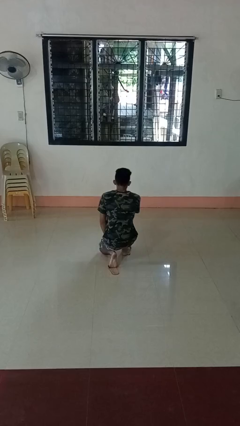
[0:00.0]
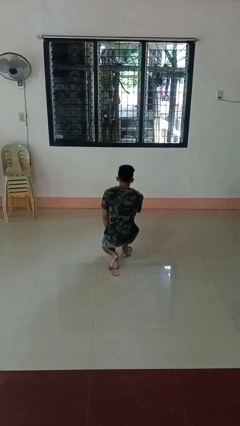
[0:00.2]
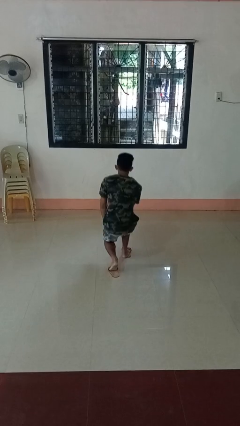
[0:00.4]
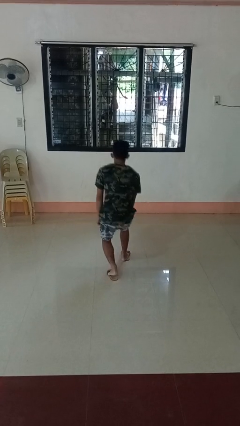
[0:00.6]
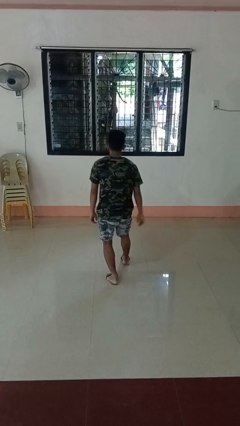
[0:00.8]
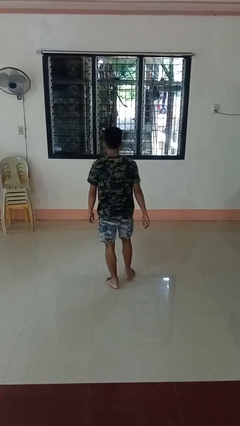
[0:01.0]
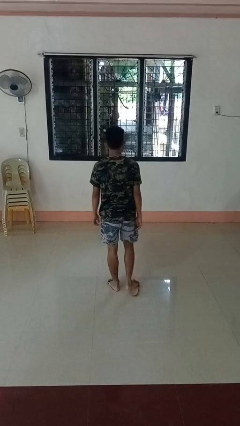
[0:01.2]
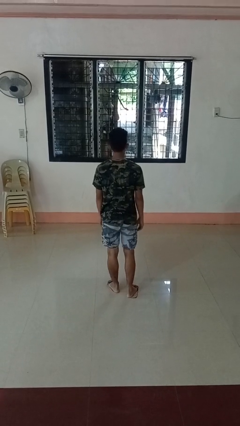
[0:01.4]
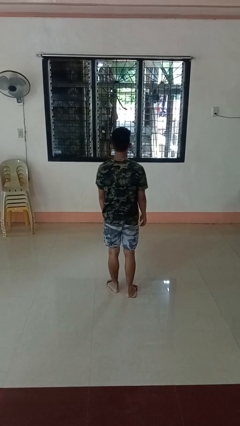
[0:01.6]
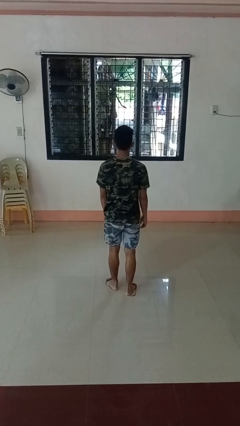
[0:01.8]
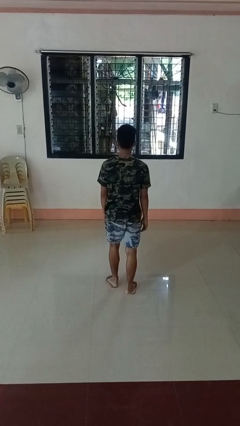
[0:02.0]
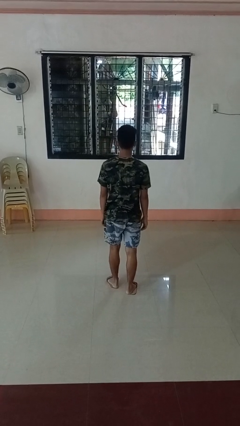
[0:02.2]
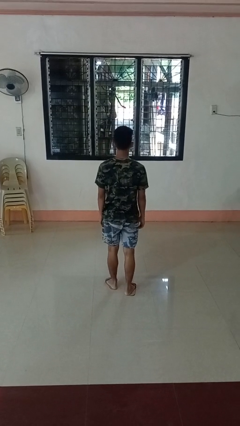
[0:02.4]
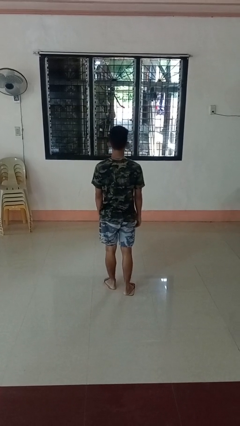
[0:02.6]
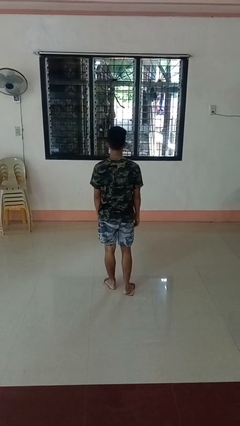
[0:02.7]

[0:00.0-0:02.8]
person stands up from floor

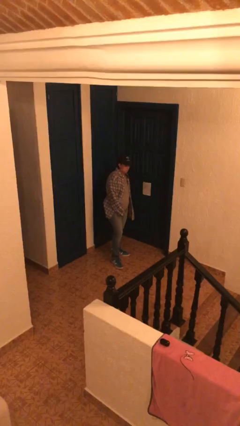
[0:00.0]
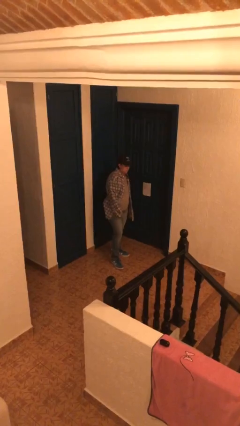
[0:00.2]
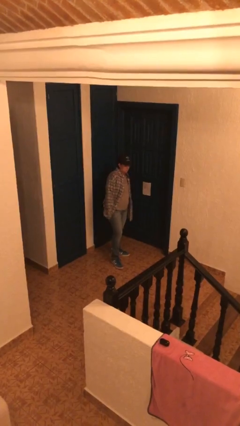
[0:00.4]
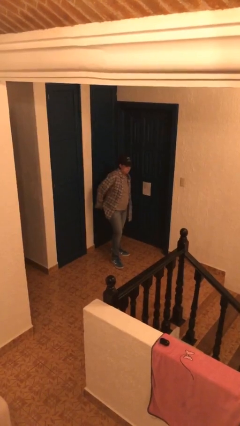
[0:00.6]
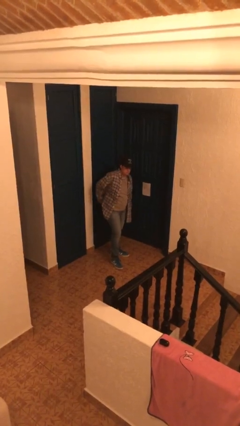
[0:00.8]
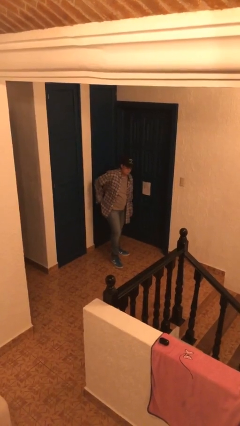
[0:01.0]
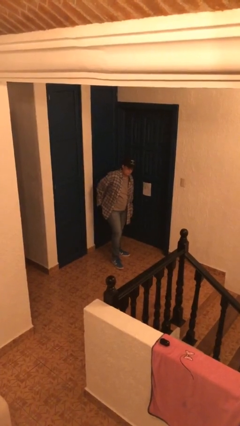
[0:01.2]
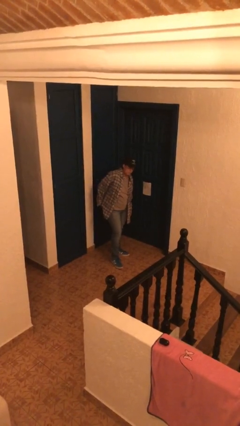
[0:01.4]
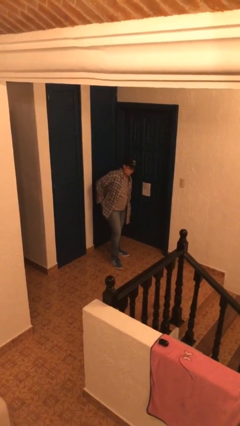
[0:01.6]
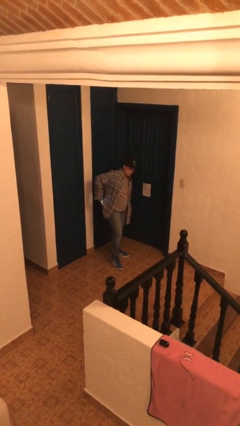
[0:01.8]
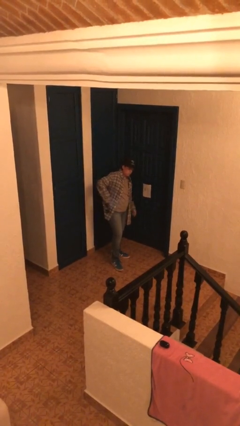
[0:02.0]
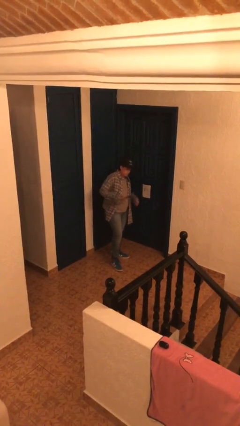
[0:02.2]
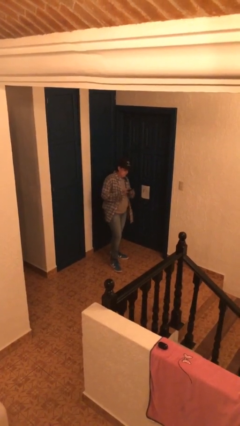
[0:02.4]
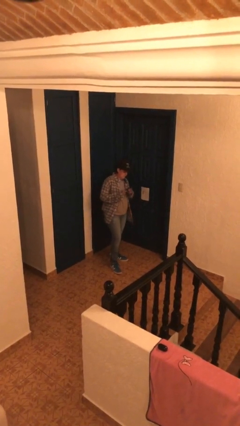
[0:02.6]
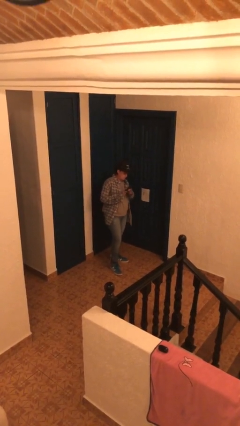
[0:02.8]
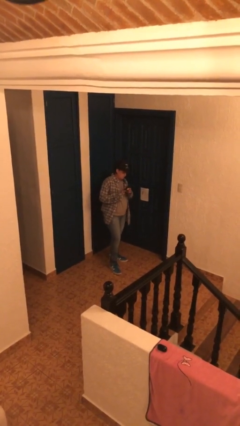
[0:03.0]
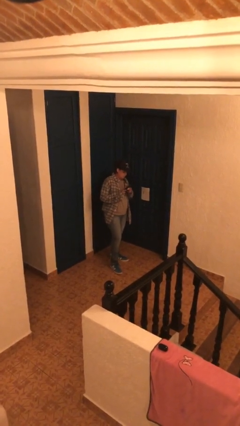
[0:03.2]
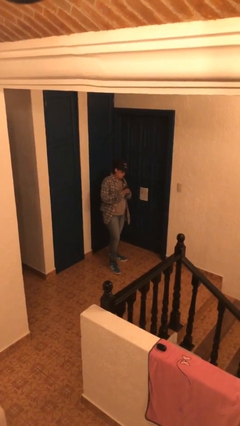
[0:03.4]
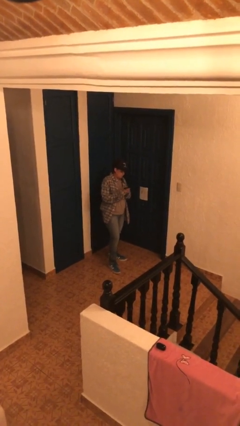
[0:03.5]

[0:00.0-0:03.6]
person takes phone from pocket

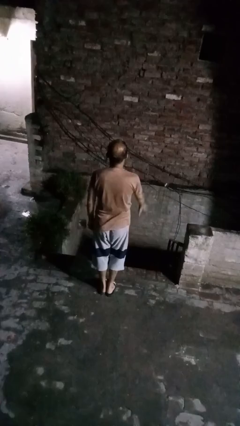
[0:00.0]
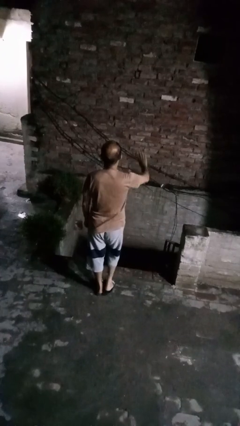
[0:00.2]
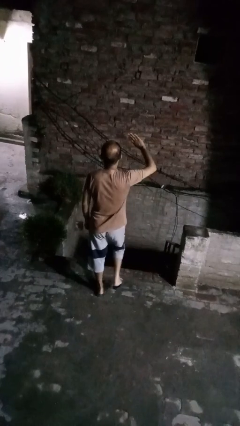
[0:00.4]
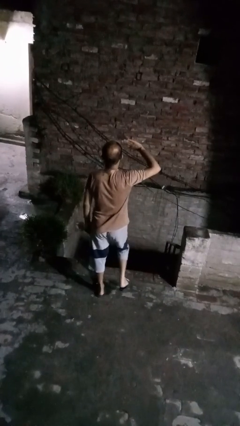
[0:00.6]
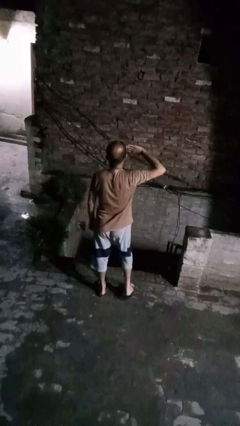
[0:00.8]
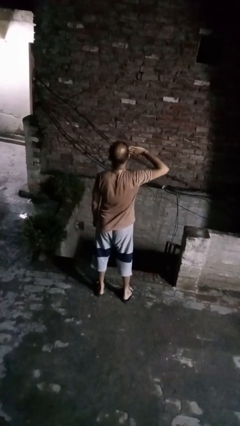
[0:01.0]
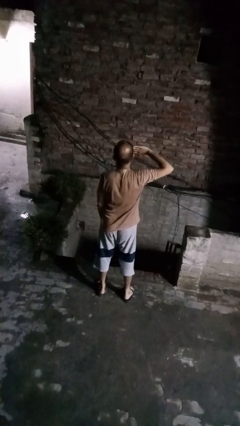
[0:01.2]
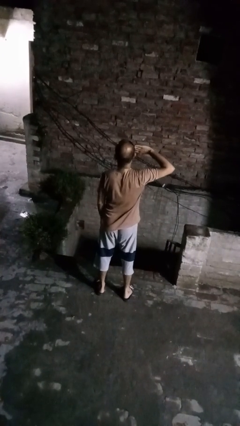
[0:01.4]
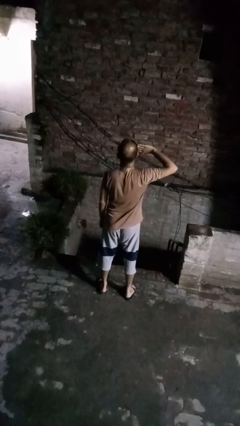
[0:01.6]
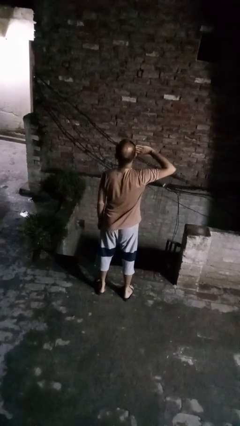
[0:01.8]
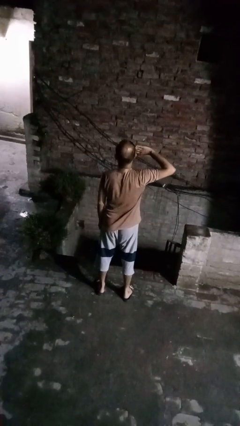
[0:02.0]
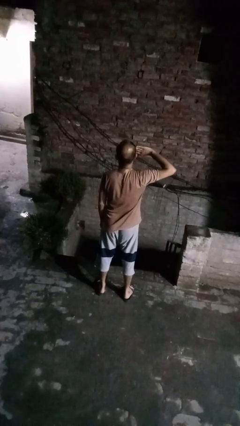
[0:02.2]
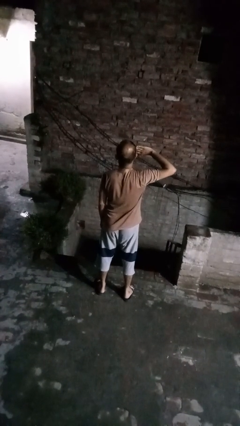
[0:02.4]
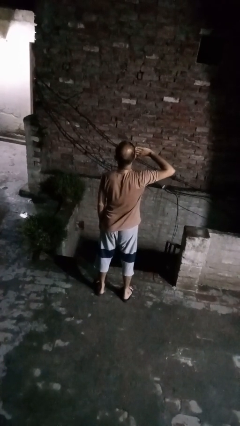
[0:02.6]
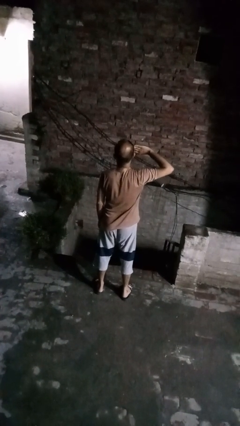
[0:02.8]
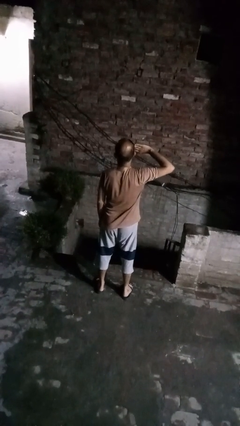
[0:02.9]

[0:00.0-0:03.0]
person salutes

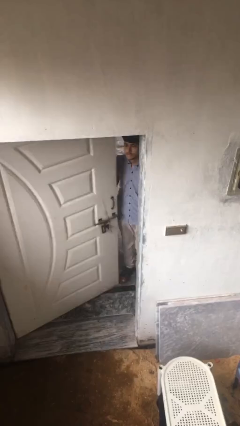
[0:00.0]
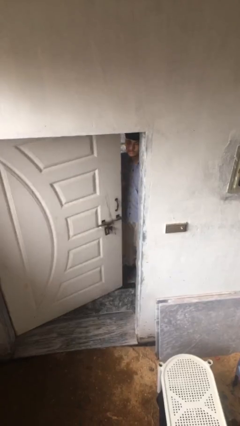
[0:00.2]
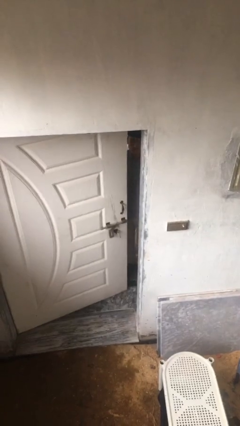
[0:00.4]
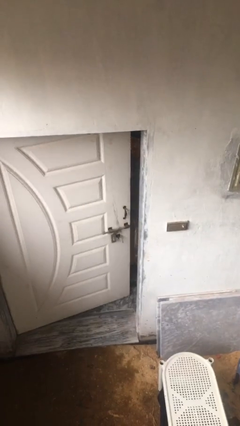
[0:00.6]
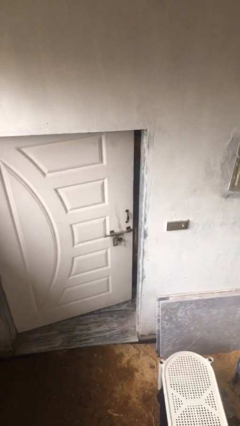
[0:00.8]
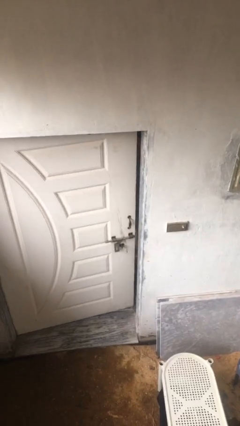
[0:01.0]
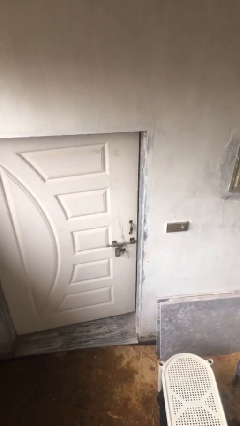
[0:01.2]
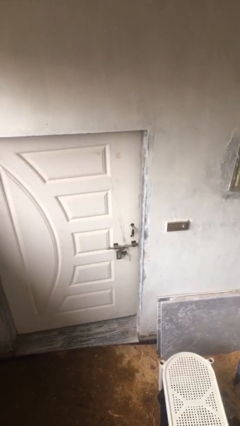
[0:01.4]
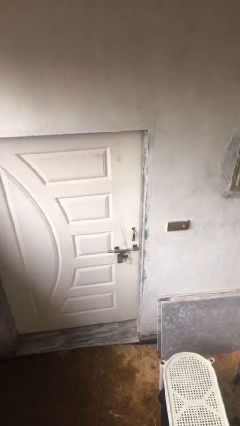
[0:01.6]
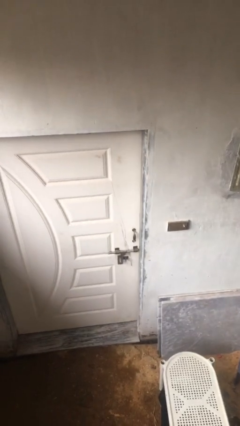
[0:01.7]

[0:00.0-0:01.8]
person closes facility door

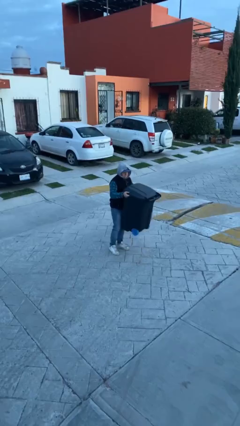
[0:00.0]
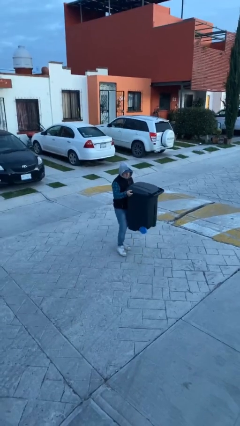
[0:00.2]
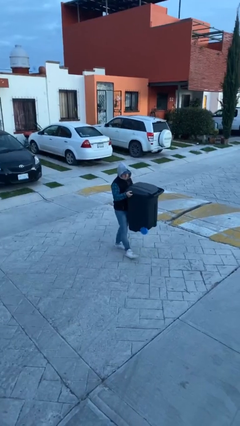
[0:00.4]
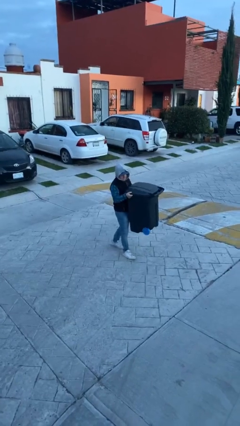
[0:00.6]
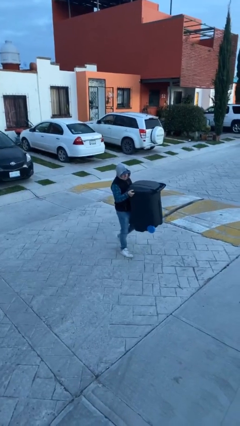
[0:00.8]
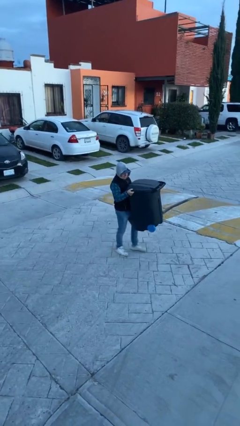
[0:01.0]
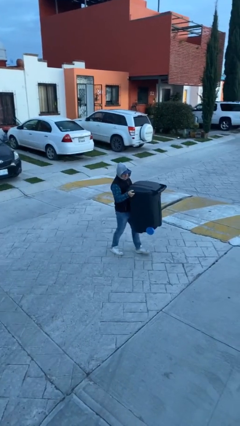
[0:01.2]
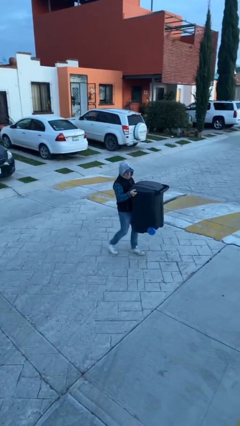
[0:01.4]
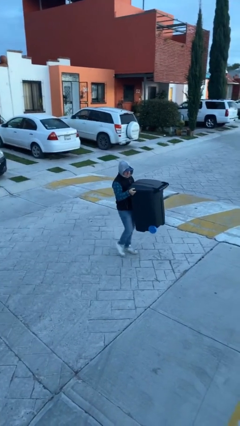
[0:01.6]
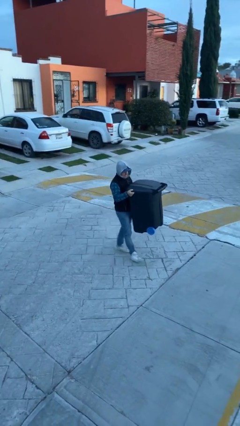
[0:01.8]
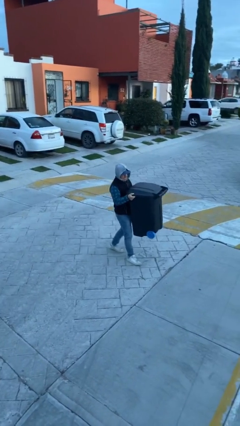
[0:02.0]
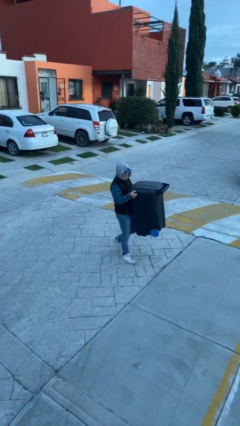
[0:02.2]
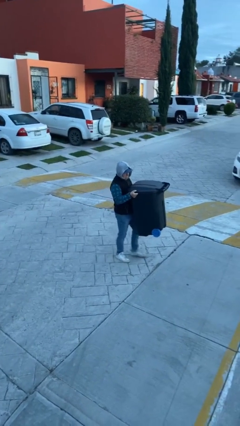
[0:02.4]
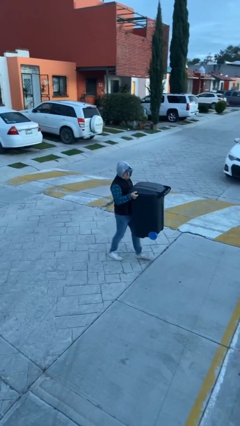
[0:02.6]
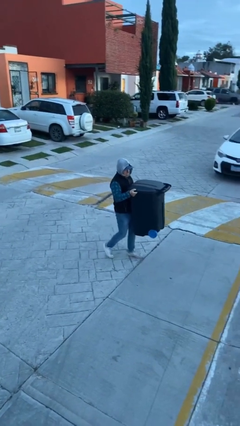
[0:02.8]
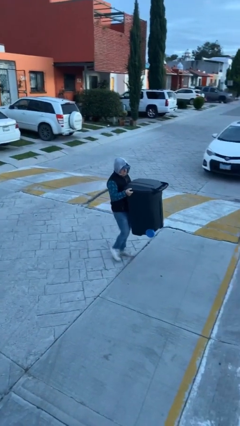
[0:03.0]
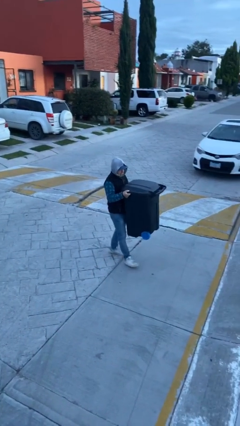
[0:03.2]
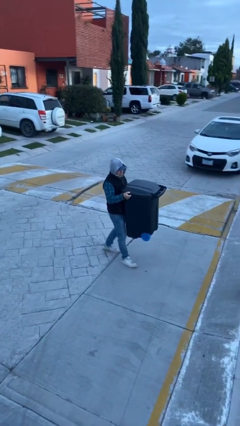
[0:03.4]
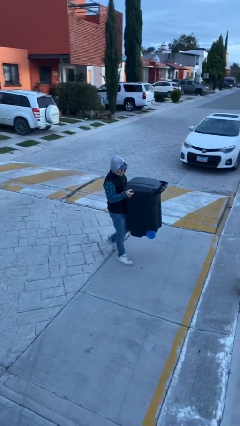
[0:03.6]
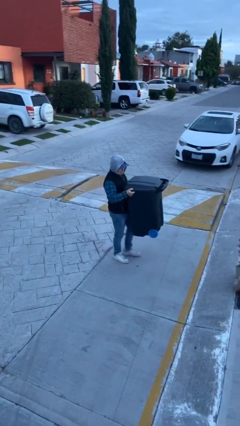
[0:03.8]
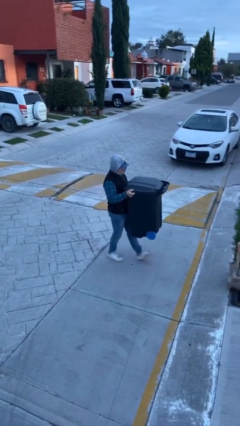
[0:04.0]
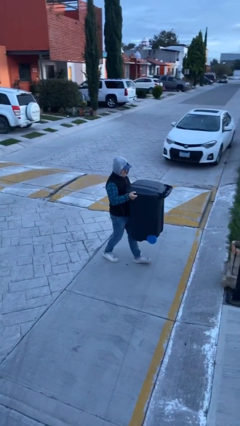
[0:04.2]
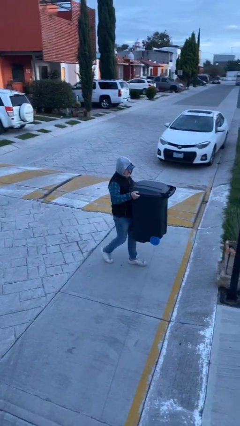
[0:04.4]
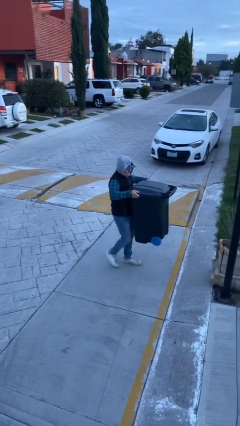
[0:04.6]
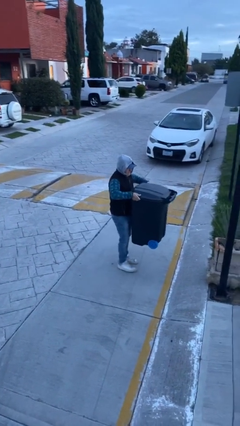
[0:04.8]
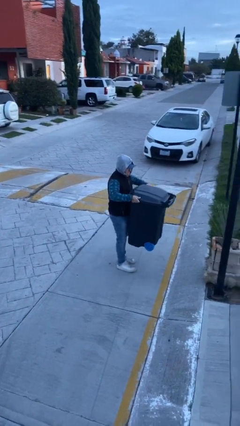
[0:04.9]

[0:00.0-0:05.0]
person carries heavy object

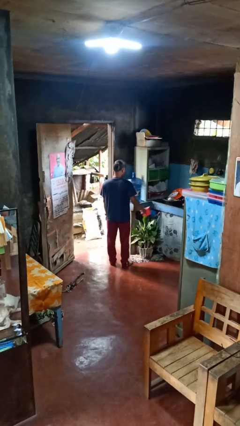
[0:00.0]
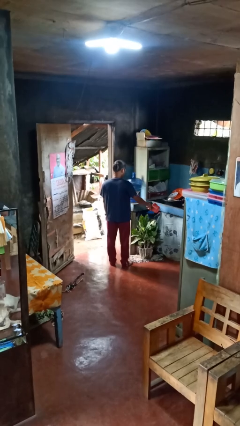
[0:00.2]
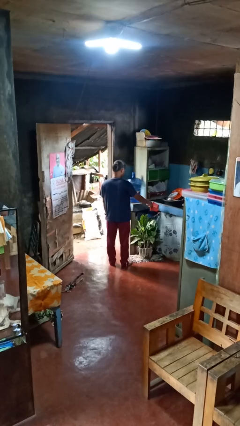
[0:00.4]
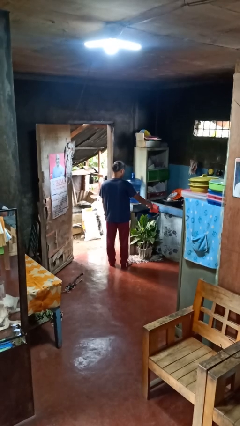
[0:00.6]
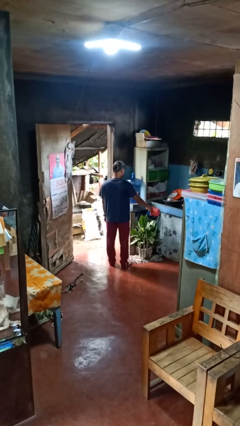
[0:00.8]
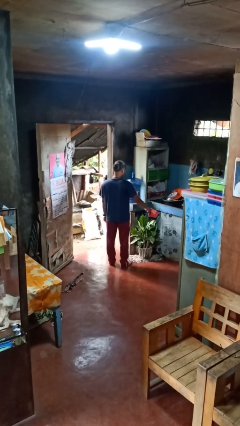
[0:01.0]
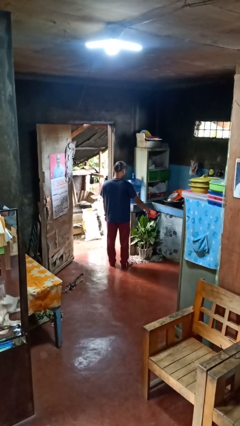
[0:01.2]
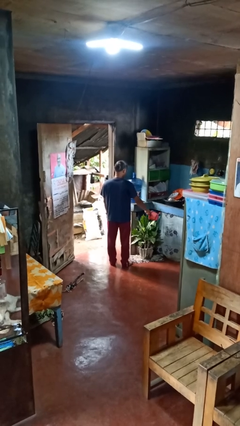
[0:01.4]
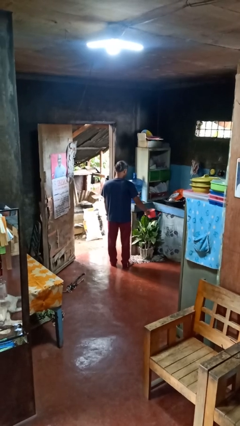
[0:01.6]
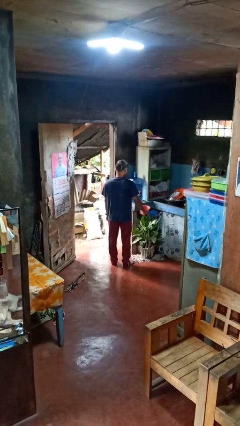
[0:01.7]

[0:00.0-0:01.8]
person waters houseplant
